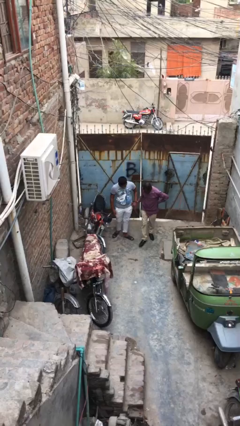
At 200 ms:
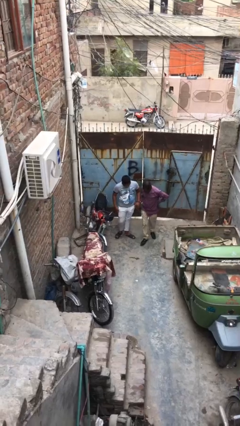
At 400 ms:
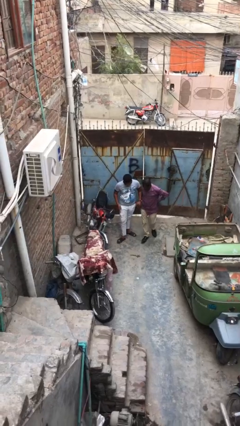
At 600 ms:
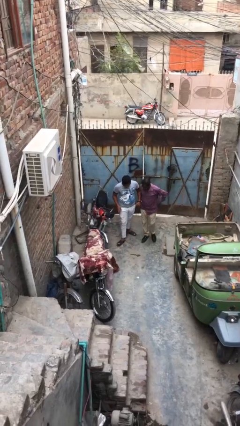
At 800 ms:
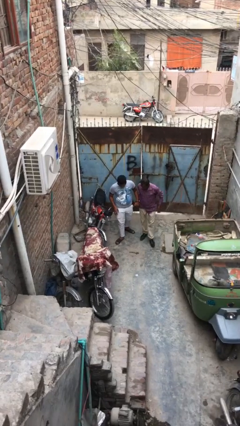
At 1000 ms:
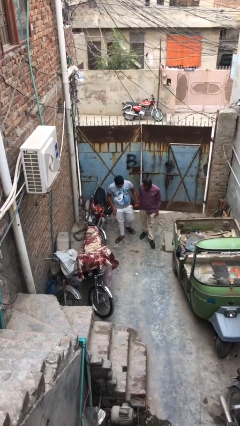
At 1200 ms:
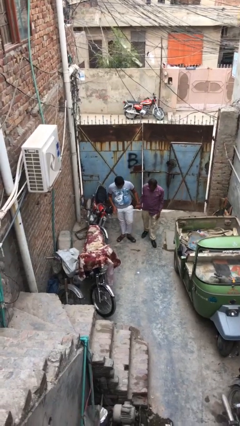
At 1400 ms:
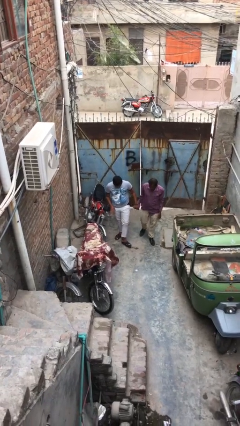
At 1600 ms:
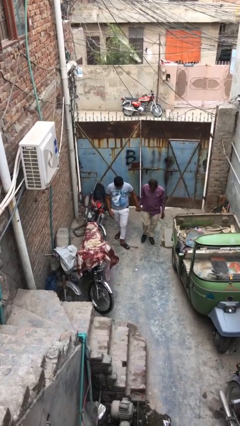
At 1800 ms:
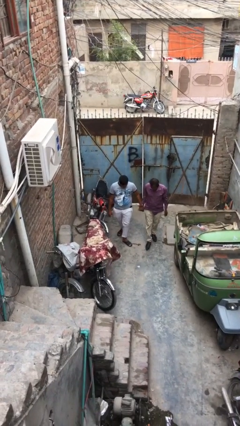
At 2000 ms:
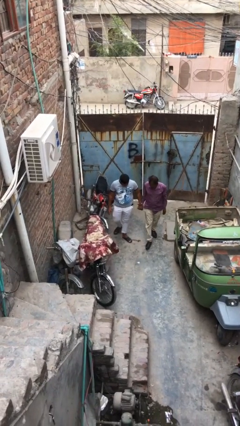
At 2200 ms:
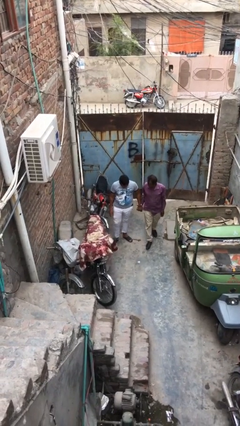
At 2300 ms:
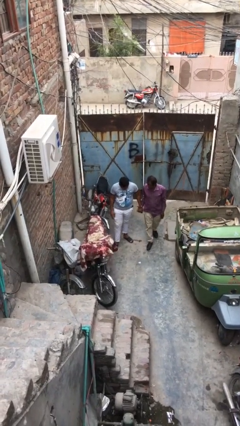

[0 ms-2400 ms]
person holds hand

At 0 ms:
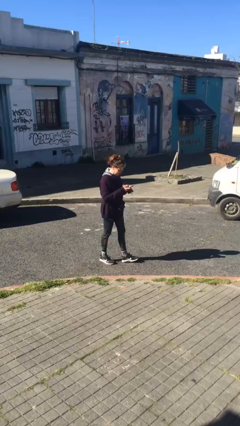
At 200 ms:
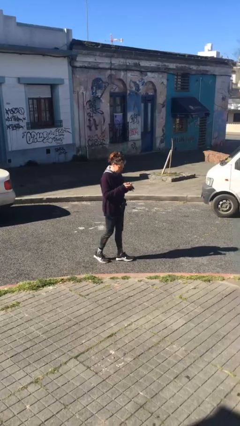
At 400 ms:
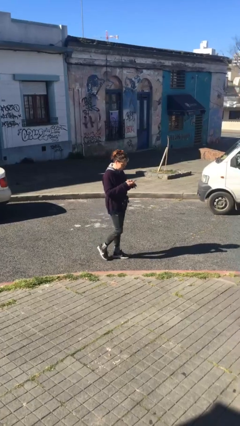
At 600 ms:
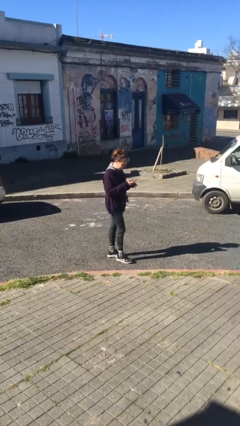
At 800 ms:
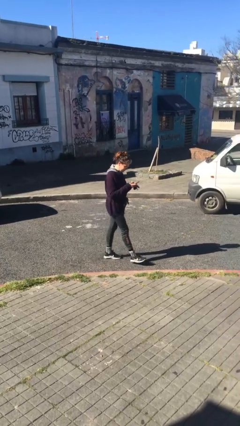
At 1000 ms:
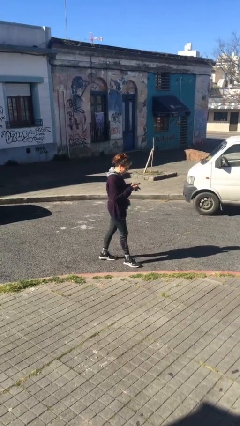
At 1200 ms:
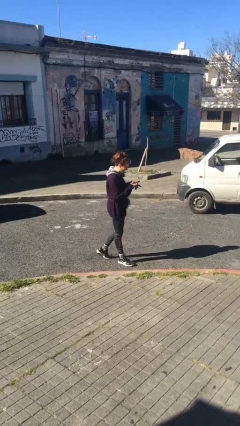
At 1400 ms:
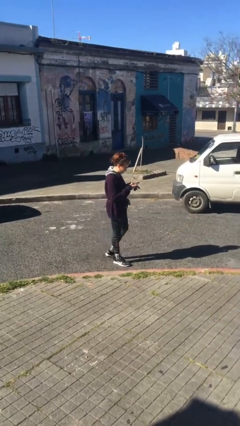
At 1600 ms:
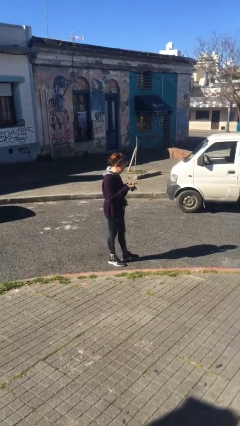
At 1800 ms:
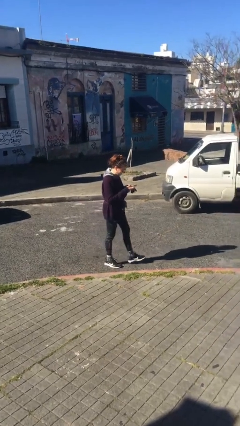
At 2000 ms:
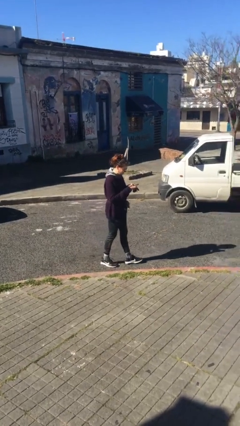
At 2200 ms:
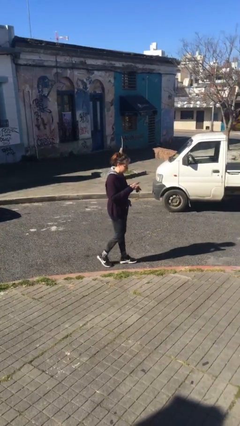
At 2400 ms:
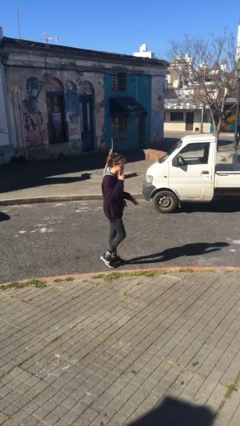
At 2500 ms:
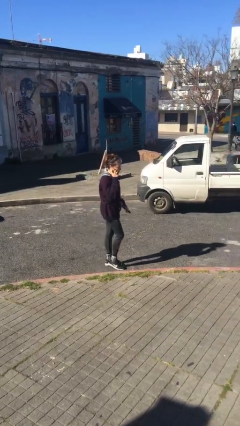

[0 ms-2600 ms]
person texts on phone

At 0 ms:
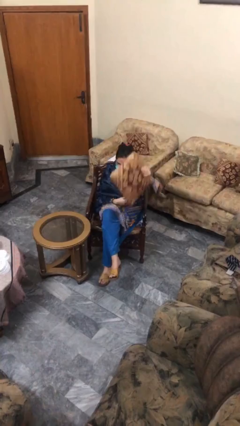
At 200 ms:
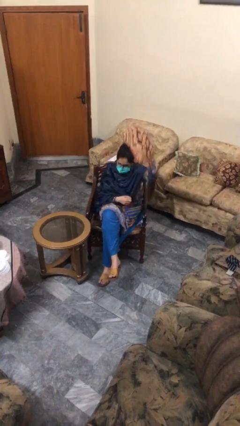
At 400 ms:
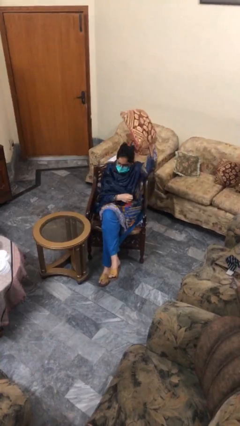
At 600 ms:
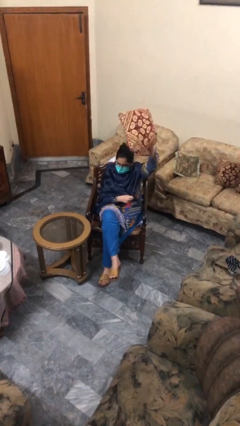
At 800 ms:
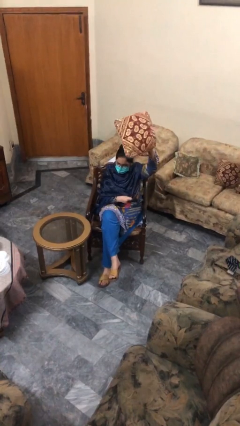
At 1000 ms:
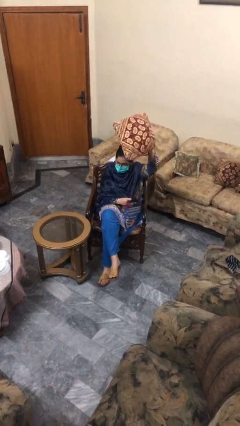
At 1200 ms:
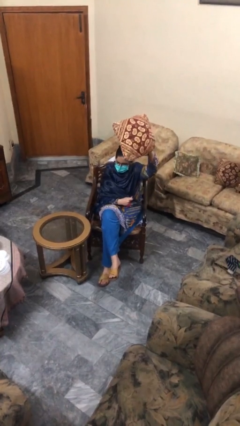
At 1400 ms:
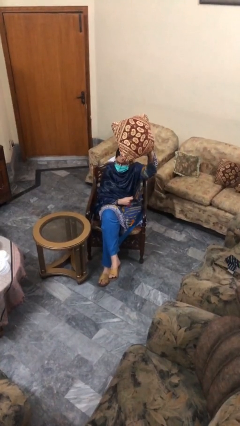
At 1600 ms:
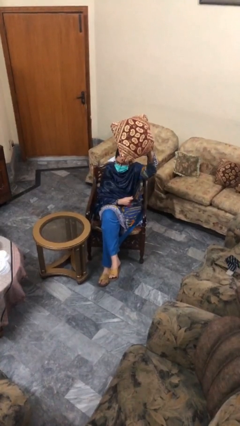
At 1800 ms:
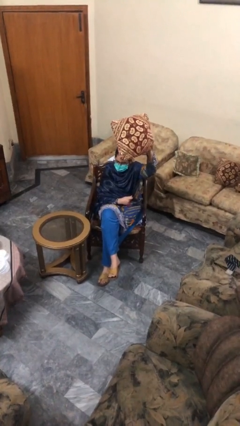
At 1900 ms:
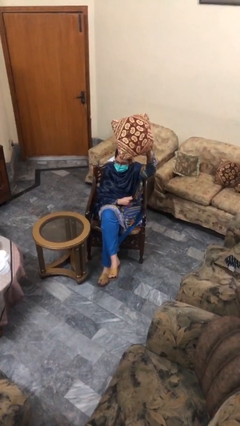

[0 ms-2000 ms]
person holds object above head

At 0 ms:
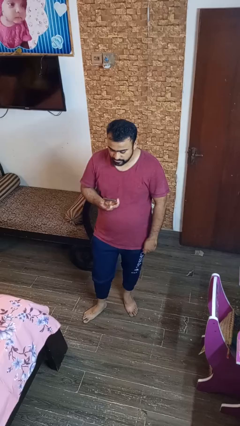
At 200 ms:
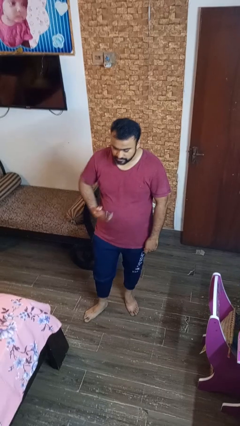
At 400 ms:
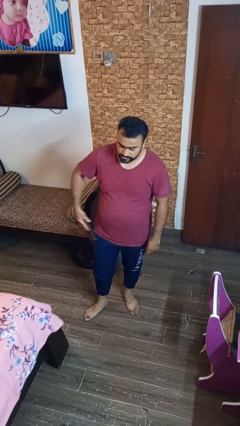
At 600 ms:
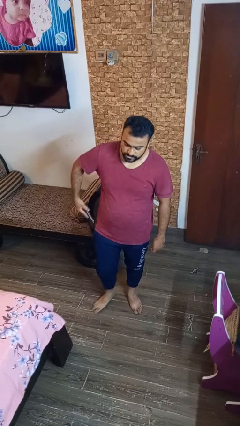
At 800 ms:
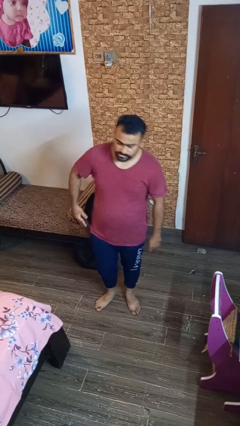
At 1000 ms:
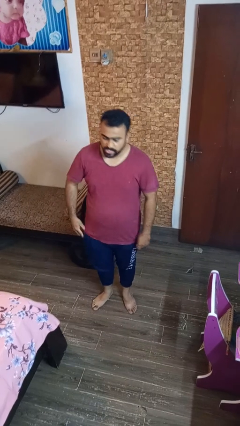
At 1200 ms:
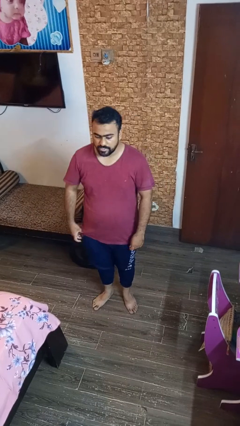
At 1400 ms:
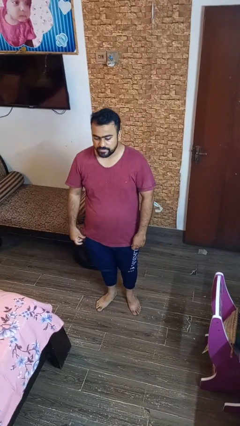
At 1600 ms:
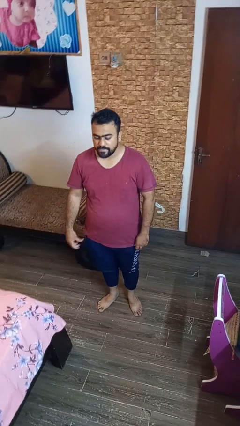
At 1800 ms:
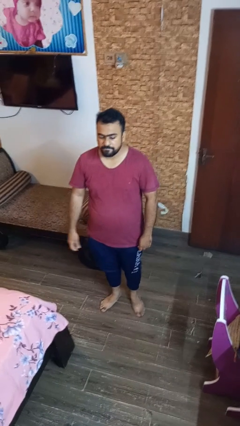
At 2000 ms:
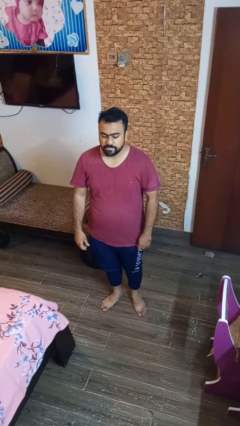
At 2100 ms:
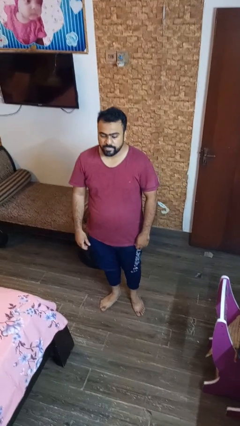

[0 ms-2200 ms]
person puts phone into pocket

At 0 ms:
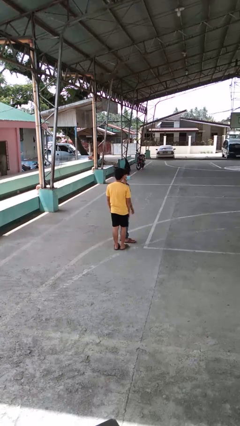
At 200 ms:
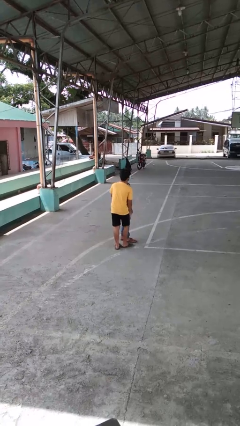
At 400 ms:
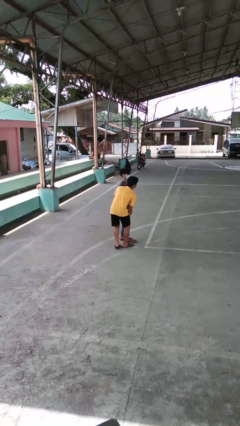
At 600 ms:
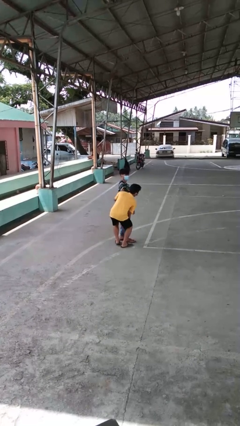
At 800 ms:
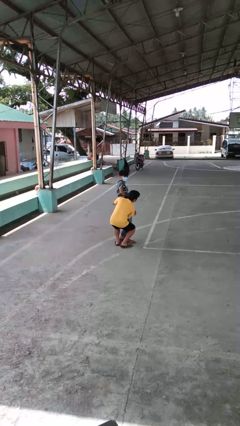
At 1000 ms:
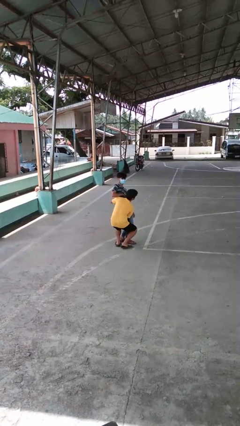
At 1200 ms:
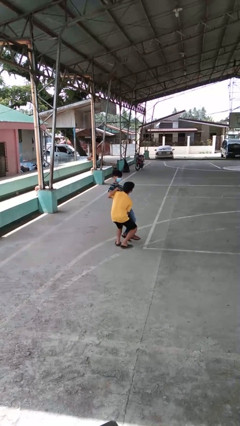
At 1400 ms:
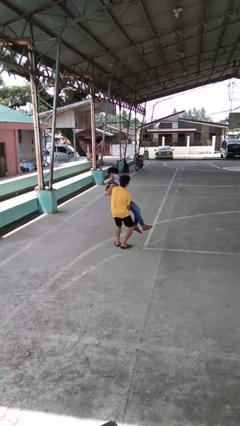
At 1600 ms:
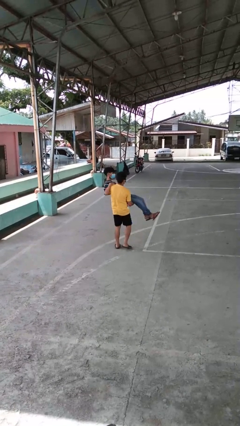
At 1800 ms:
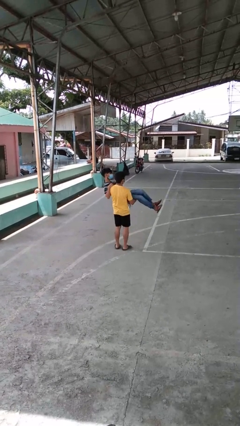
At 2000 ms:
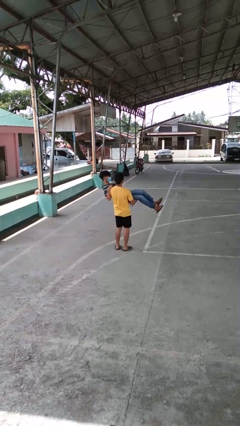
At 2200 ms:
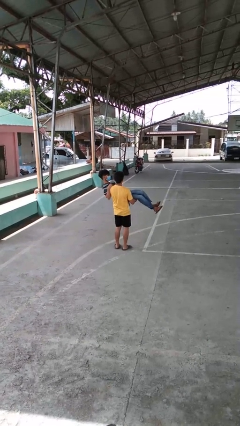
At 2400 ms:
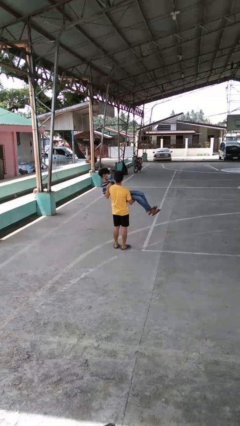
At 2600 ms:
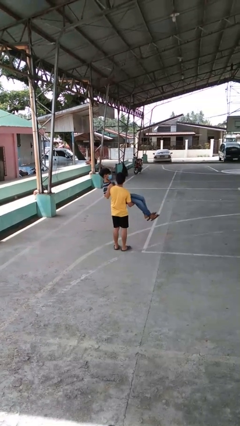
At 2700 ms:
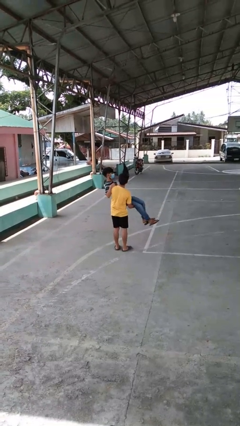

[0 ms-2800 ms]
person picks up person

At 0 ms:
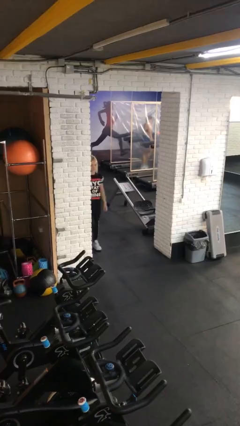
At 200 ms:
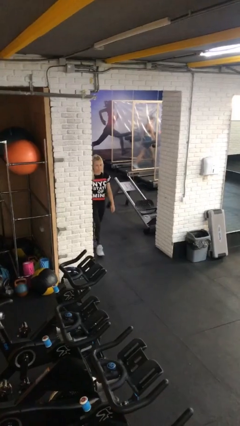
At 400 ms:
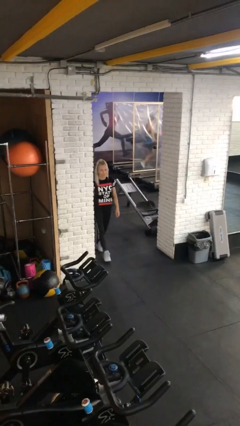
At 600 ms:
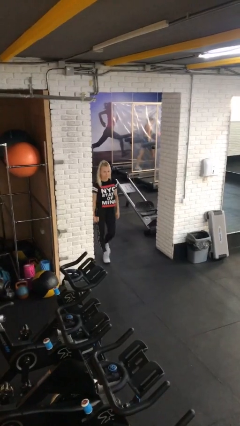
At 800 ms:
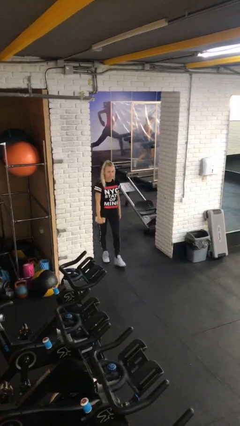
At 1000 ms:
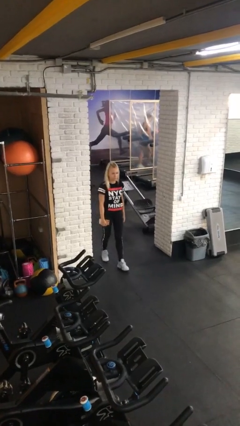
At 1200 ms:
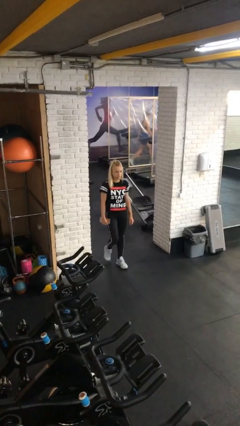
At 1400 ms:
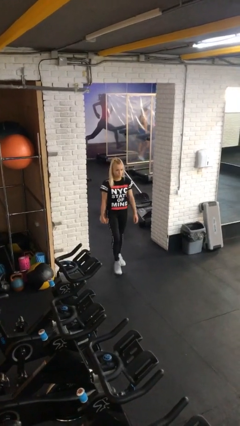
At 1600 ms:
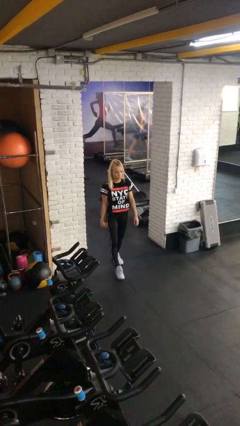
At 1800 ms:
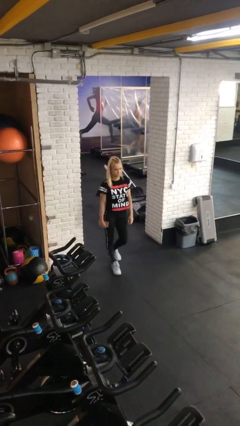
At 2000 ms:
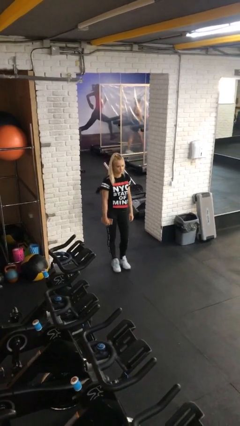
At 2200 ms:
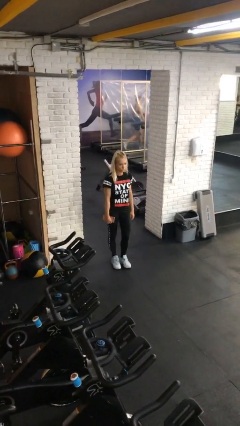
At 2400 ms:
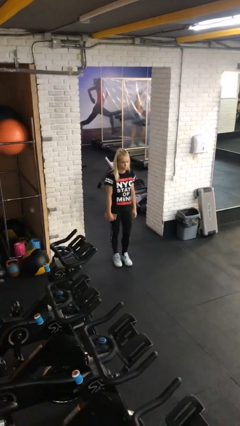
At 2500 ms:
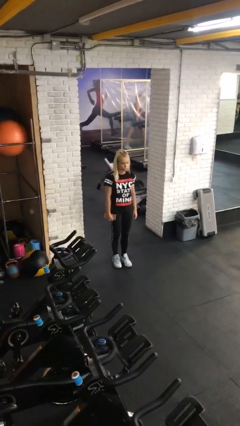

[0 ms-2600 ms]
person enters scene through structure

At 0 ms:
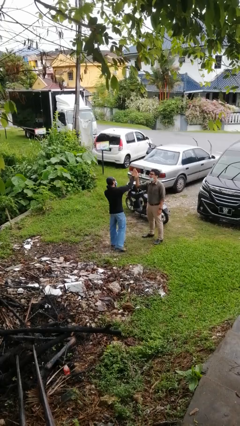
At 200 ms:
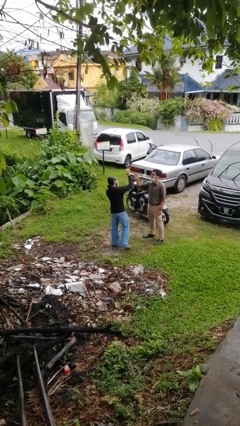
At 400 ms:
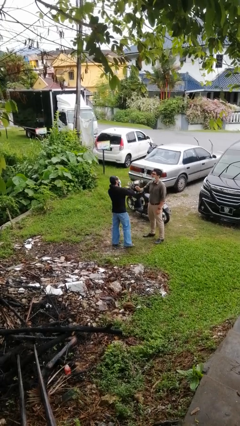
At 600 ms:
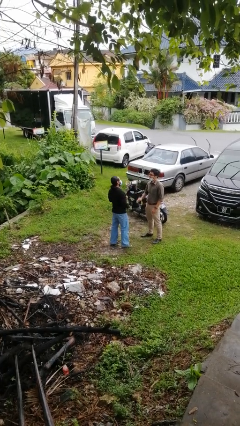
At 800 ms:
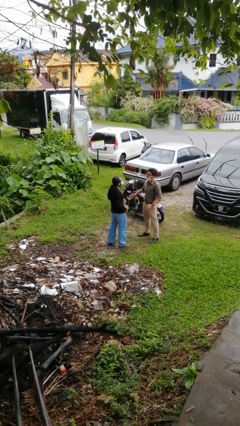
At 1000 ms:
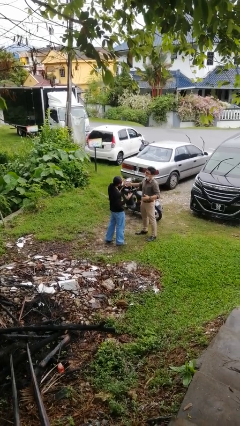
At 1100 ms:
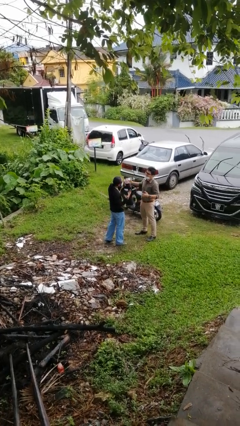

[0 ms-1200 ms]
person highfives hand

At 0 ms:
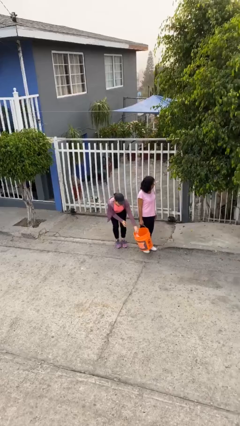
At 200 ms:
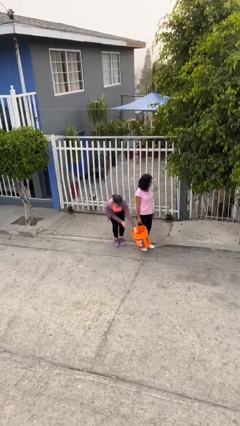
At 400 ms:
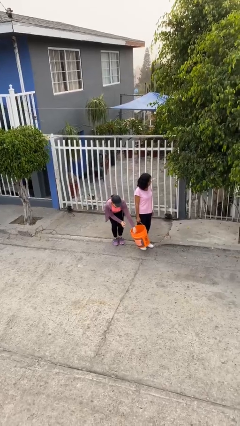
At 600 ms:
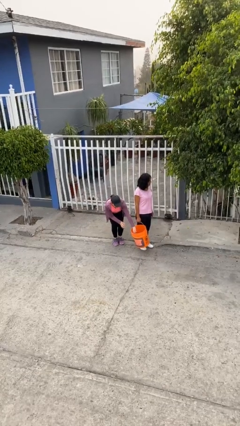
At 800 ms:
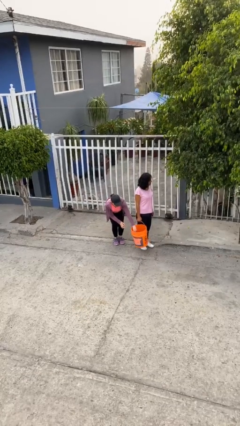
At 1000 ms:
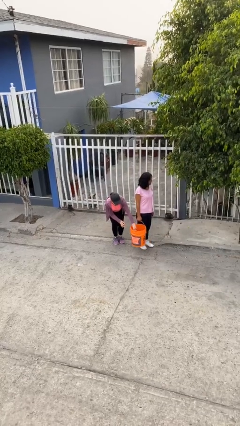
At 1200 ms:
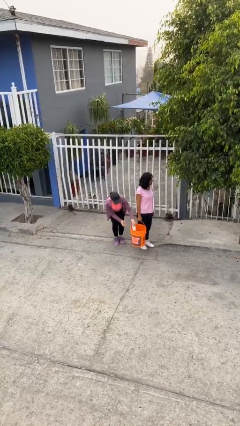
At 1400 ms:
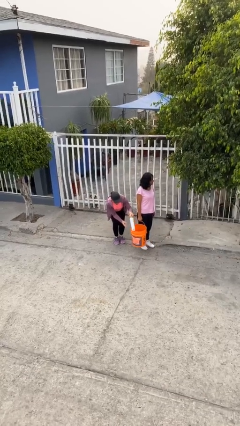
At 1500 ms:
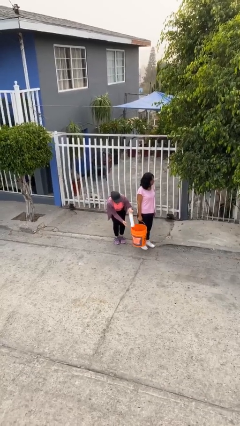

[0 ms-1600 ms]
person steals object from person
